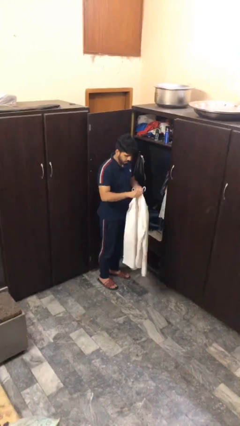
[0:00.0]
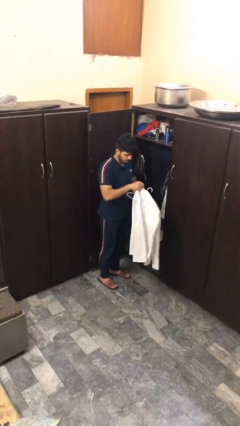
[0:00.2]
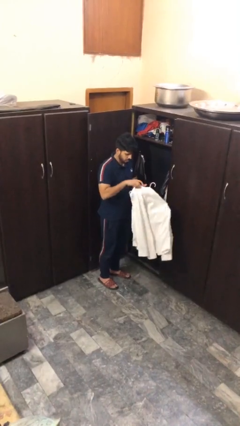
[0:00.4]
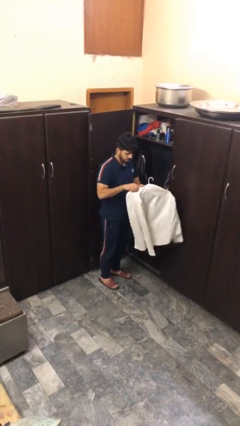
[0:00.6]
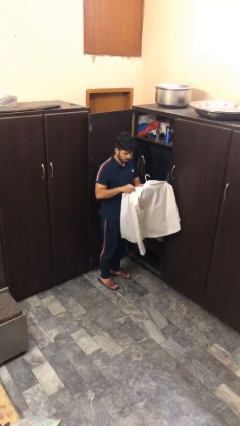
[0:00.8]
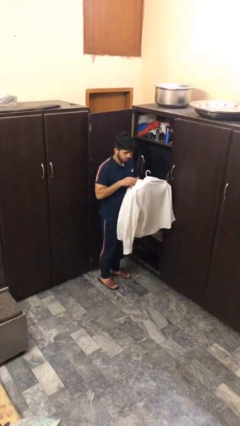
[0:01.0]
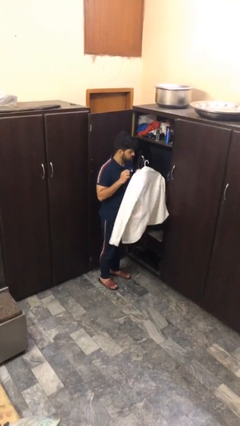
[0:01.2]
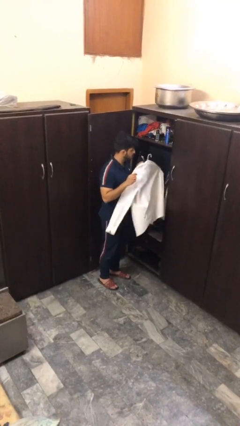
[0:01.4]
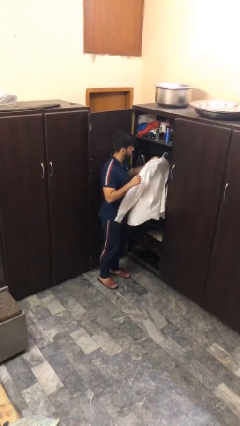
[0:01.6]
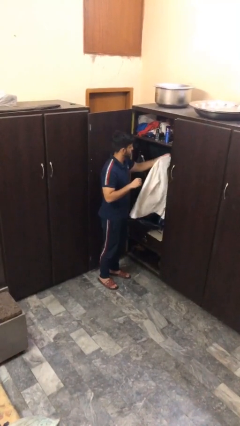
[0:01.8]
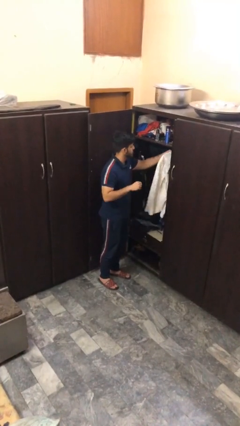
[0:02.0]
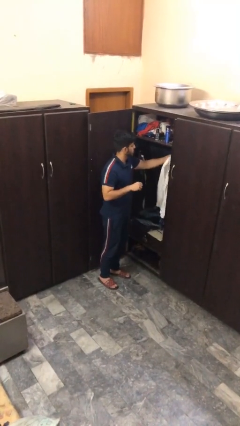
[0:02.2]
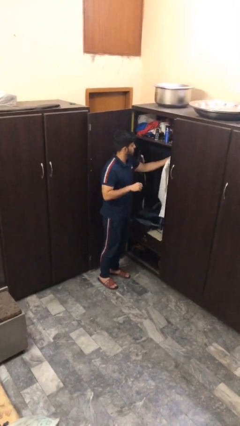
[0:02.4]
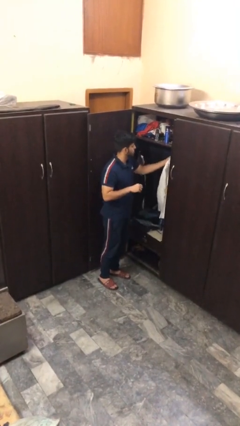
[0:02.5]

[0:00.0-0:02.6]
person puts clothes into closet

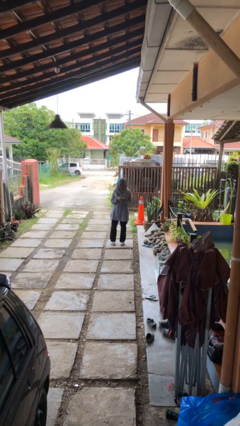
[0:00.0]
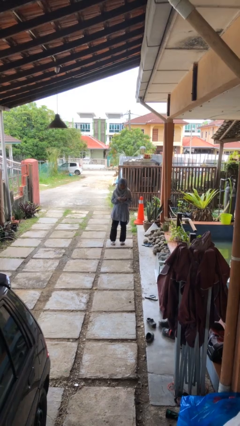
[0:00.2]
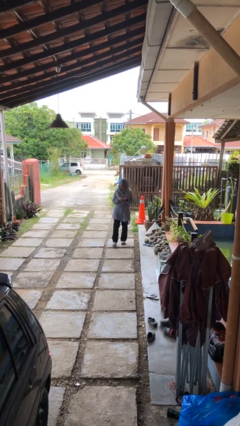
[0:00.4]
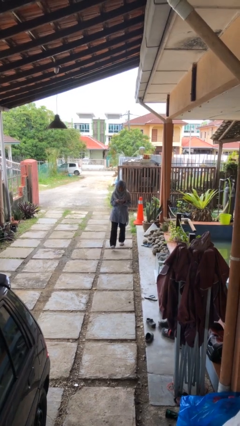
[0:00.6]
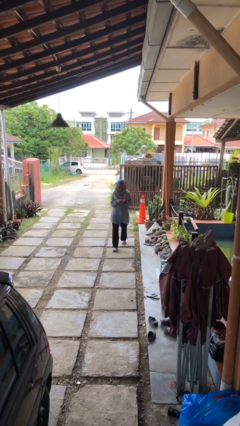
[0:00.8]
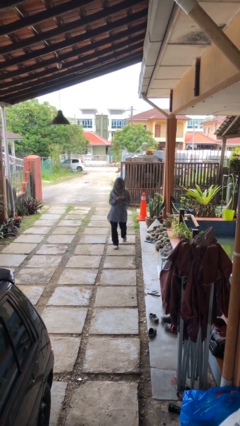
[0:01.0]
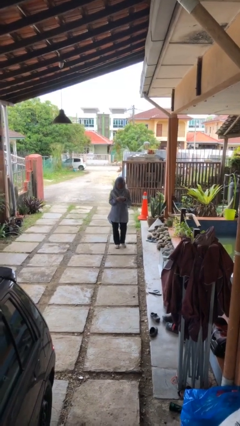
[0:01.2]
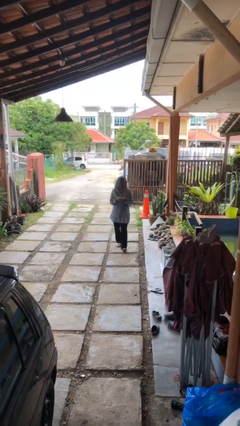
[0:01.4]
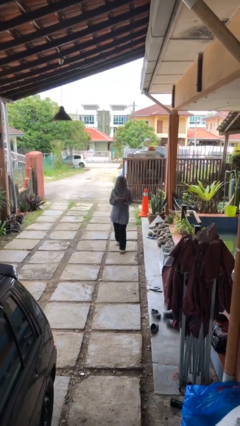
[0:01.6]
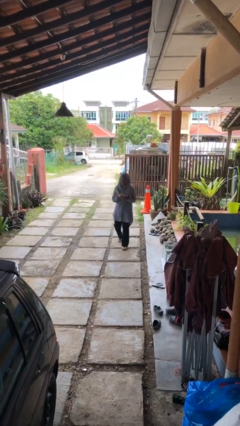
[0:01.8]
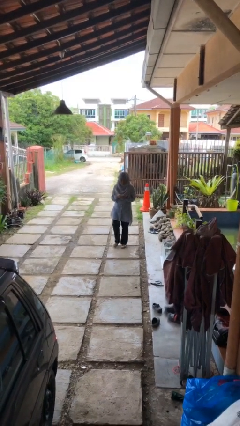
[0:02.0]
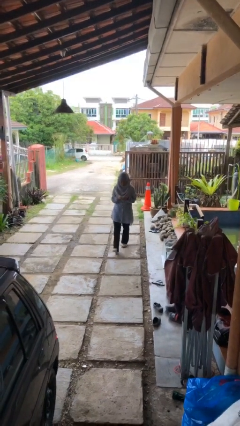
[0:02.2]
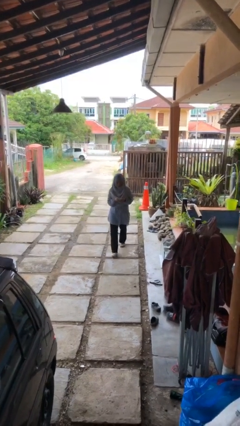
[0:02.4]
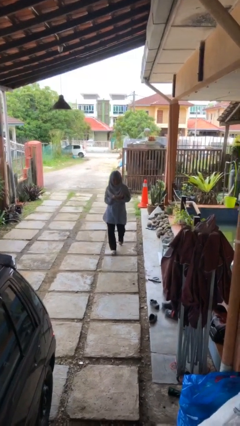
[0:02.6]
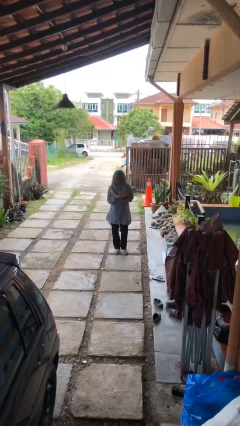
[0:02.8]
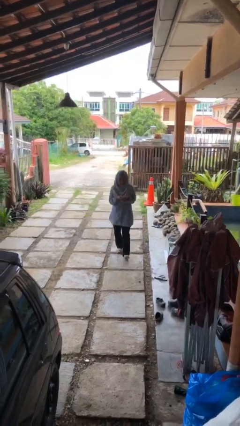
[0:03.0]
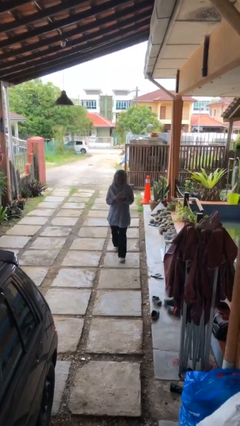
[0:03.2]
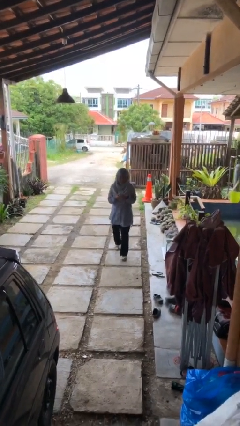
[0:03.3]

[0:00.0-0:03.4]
person texts on phone

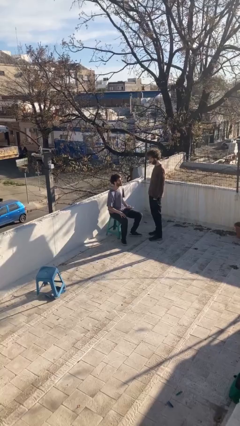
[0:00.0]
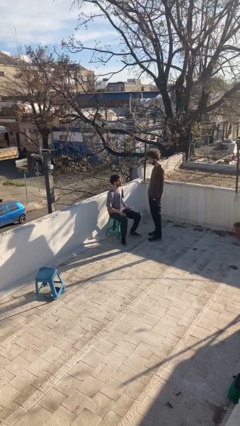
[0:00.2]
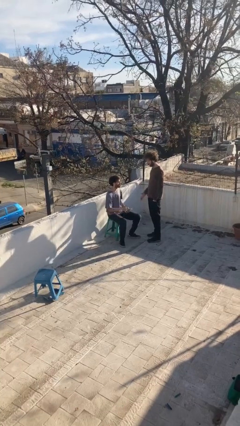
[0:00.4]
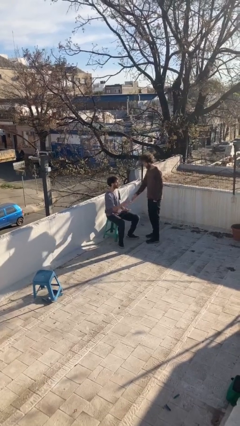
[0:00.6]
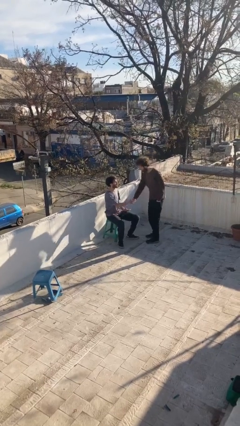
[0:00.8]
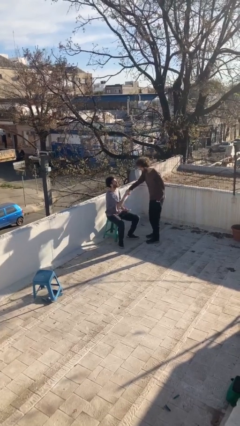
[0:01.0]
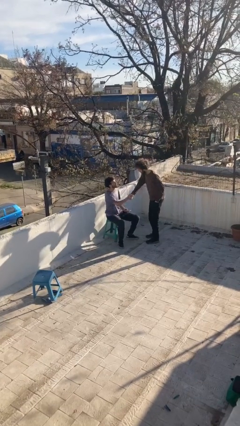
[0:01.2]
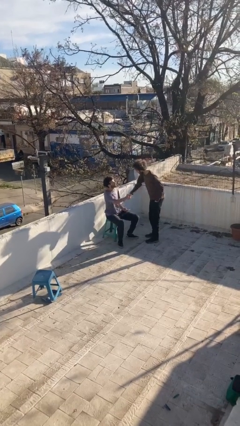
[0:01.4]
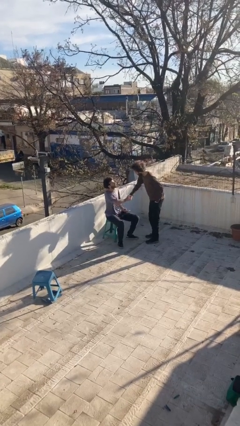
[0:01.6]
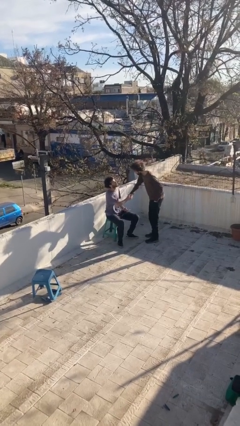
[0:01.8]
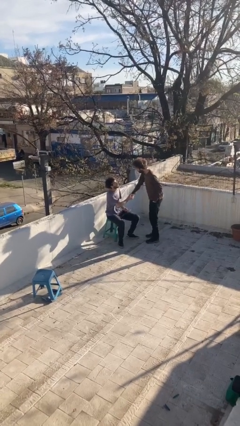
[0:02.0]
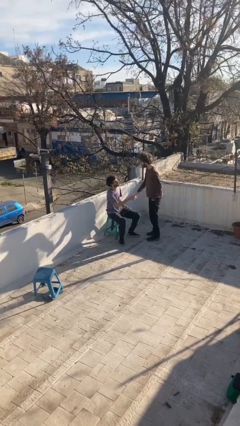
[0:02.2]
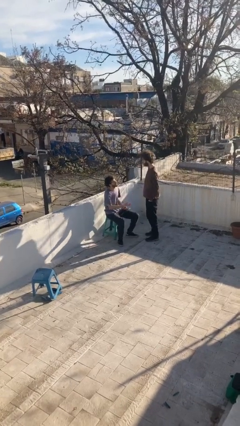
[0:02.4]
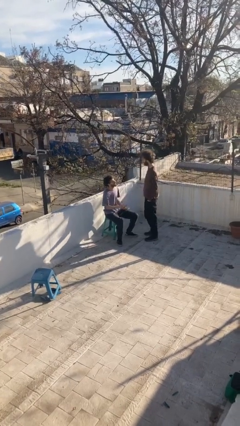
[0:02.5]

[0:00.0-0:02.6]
person shakes hand

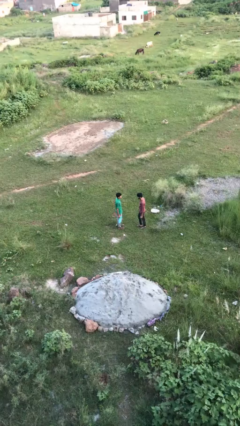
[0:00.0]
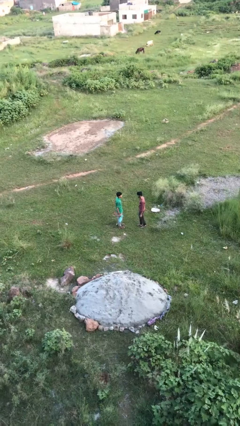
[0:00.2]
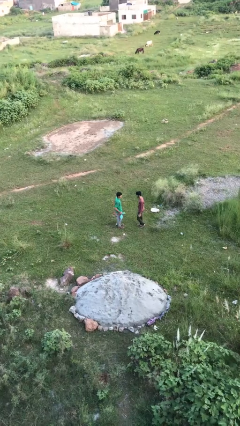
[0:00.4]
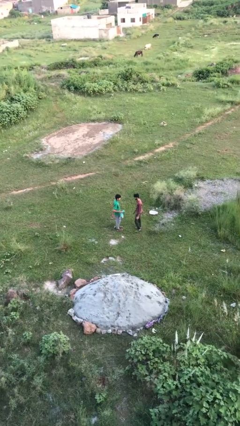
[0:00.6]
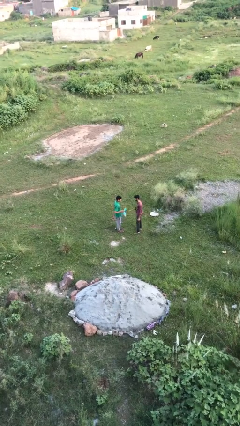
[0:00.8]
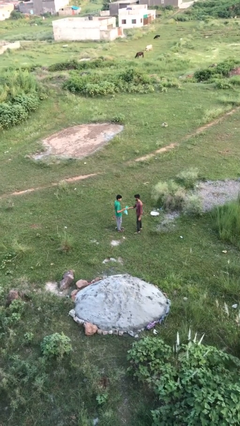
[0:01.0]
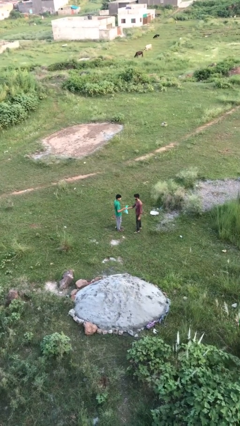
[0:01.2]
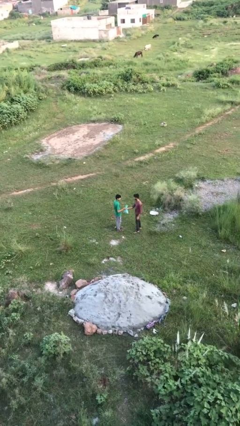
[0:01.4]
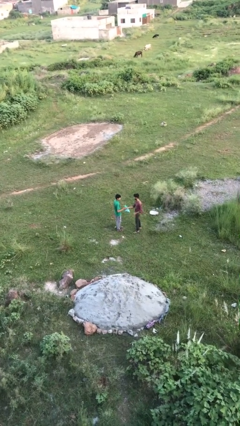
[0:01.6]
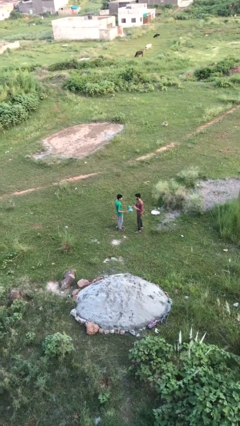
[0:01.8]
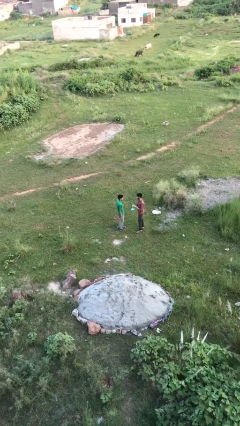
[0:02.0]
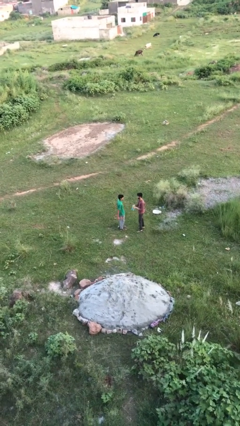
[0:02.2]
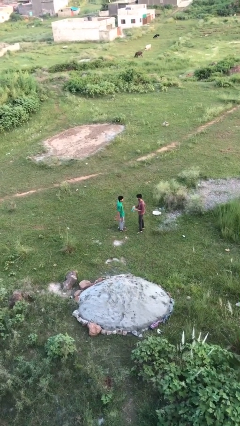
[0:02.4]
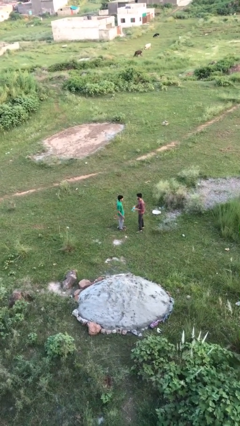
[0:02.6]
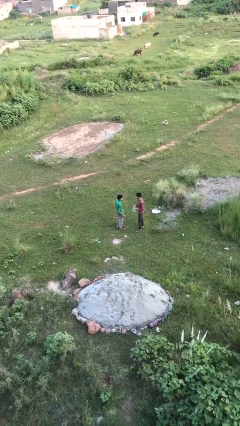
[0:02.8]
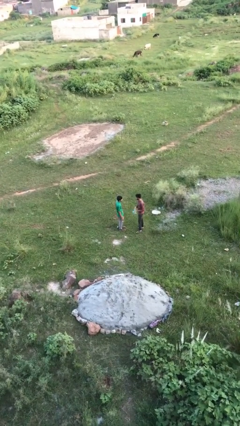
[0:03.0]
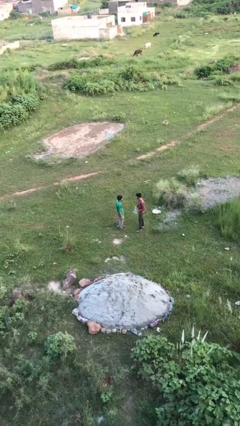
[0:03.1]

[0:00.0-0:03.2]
person transfers object to person

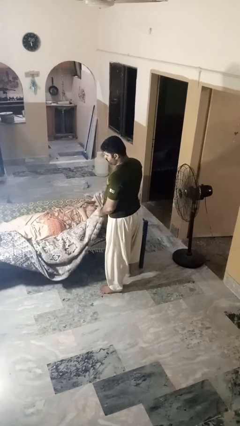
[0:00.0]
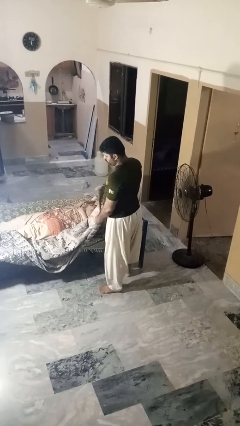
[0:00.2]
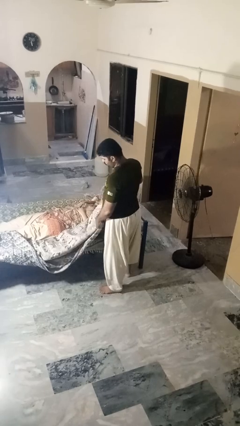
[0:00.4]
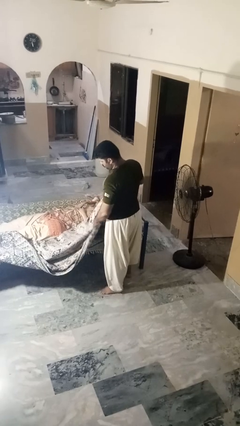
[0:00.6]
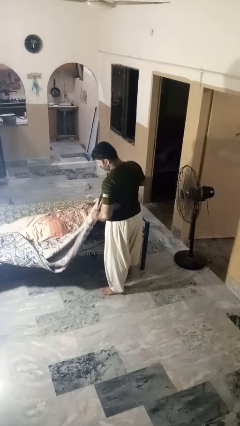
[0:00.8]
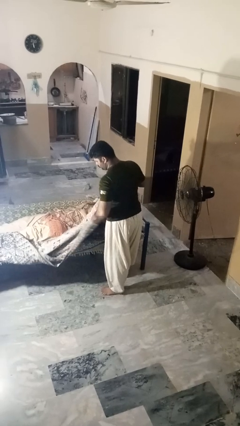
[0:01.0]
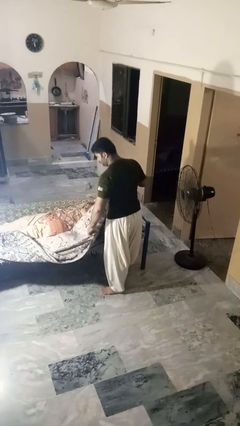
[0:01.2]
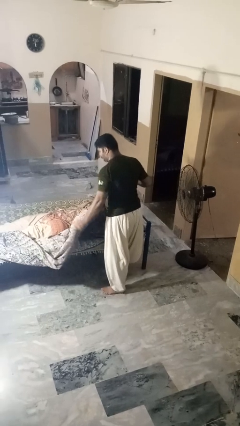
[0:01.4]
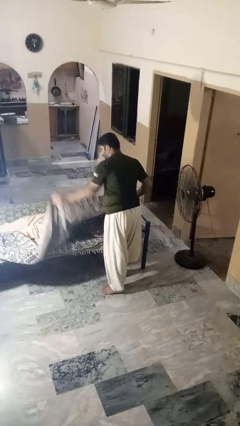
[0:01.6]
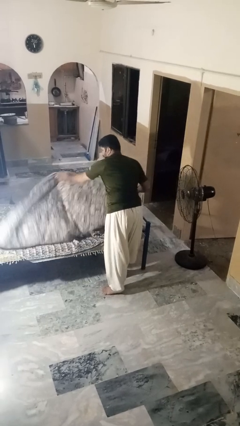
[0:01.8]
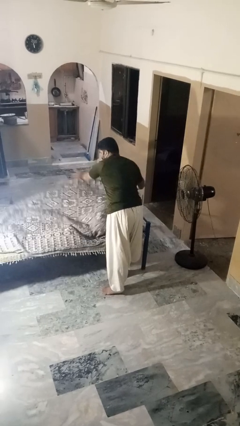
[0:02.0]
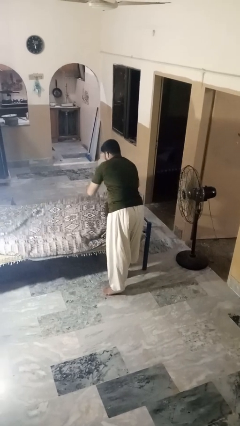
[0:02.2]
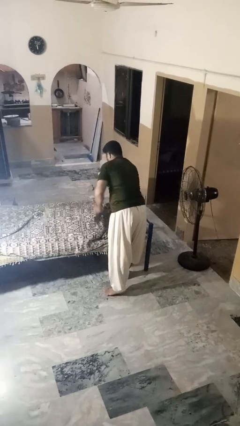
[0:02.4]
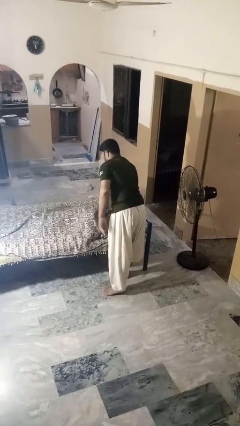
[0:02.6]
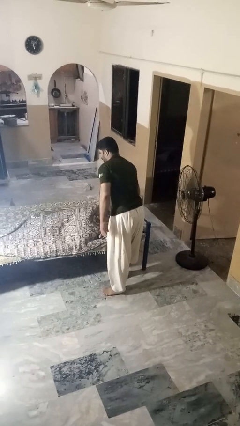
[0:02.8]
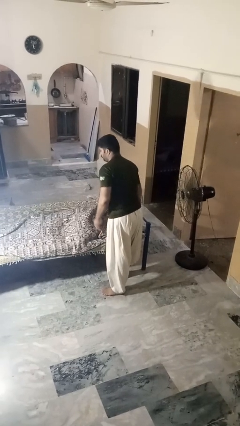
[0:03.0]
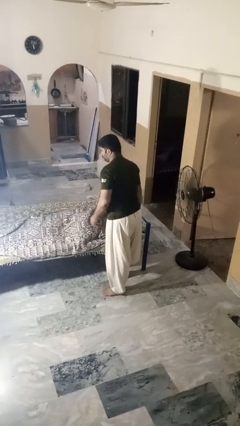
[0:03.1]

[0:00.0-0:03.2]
person covers friend with blanket

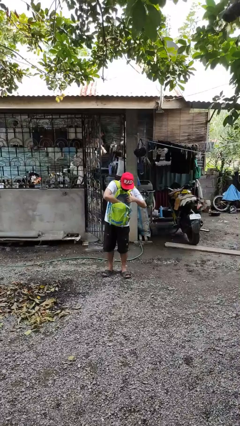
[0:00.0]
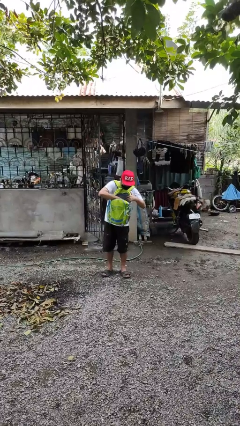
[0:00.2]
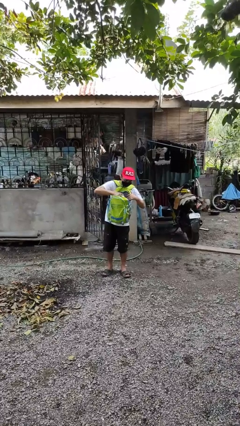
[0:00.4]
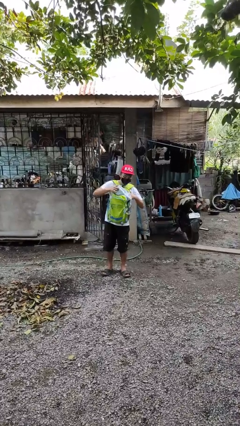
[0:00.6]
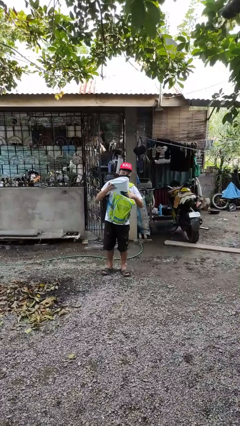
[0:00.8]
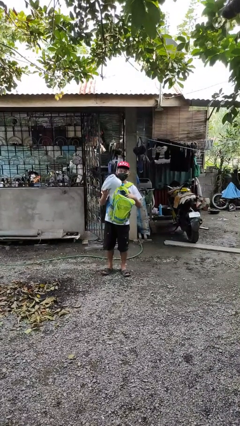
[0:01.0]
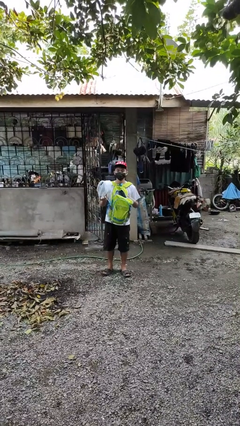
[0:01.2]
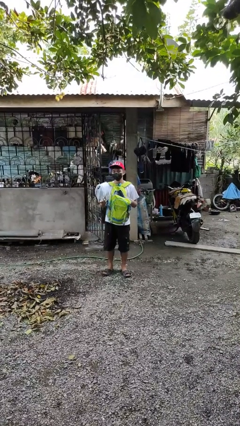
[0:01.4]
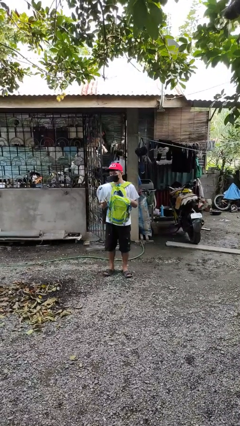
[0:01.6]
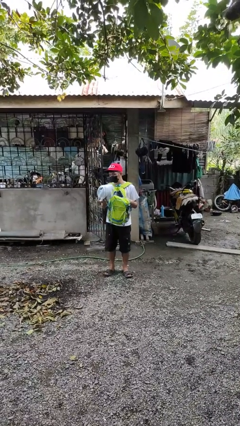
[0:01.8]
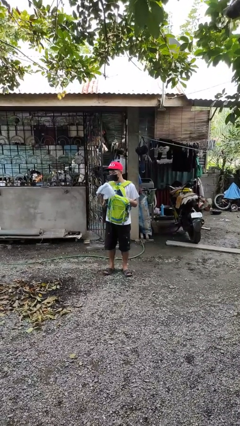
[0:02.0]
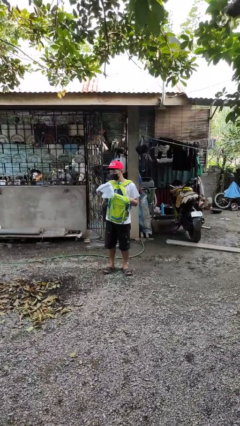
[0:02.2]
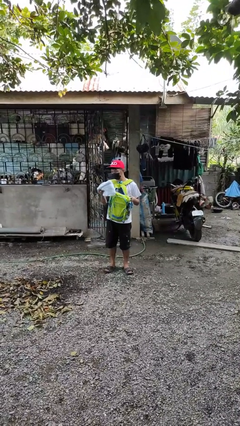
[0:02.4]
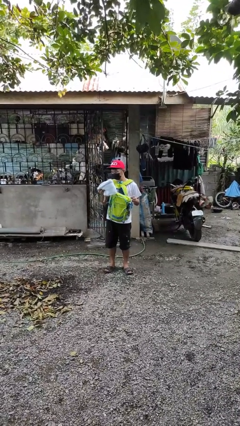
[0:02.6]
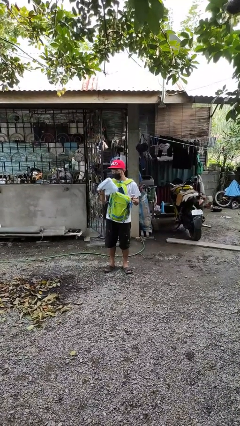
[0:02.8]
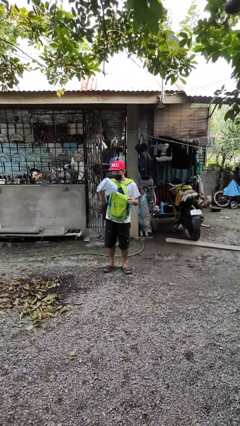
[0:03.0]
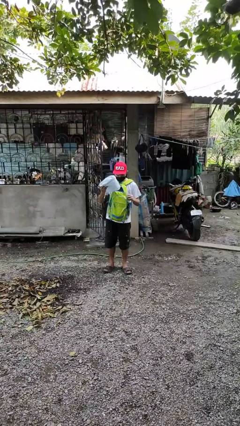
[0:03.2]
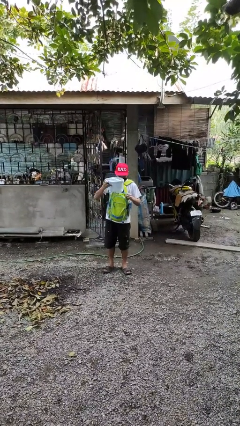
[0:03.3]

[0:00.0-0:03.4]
person takes object from backpack
